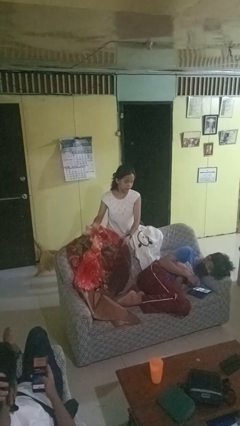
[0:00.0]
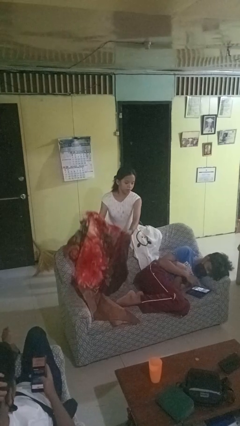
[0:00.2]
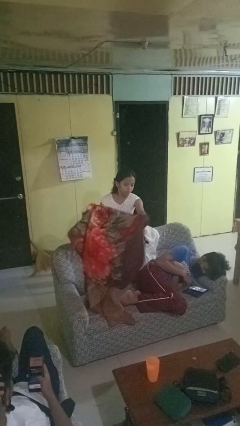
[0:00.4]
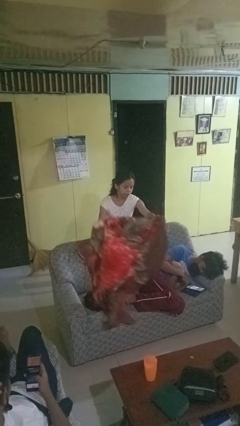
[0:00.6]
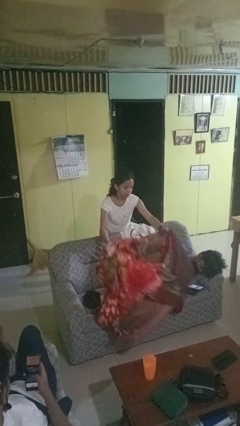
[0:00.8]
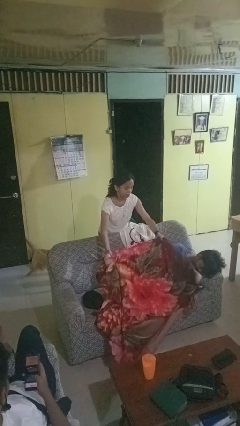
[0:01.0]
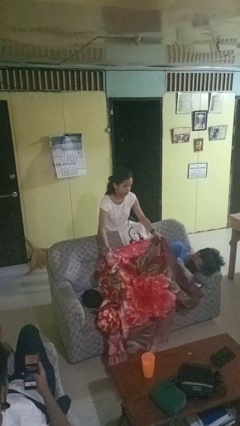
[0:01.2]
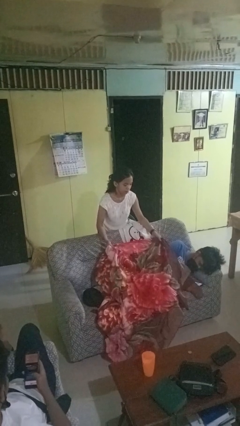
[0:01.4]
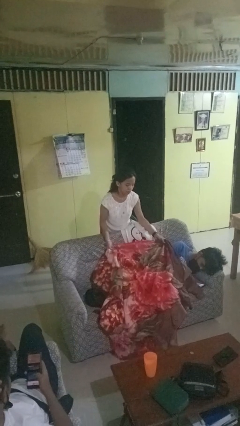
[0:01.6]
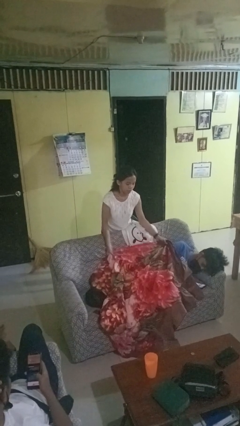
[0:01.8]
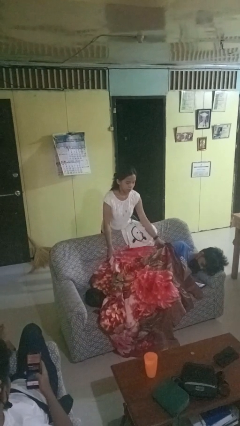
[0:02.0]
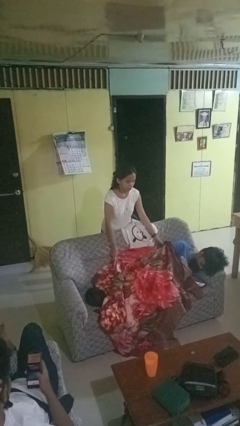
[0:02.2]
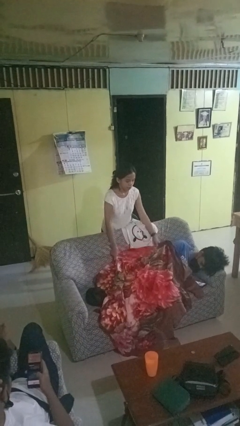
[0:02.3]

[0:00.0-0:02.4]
person covers friend with blanket

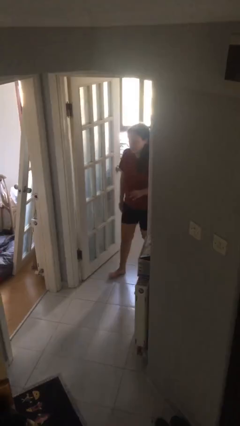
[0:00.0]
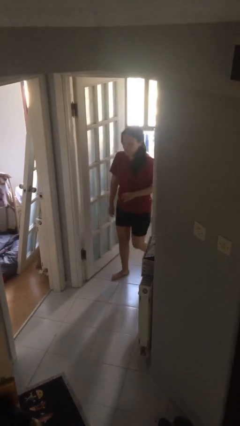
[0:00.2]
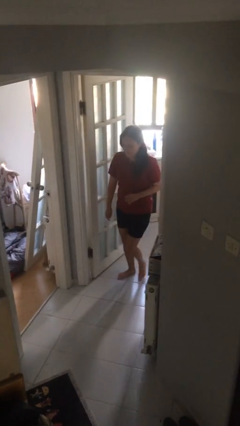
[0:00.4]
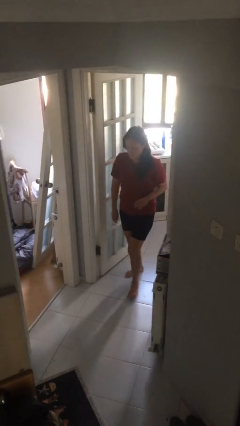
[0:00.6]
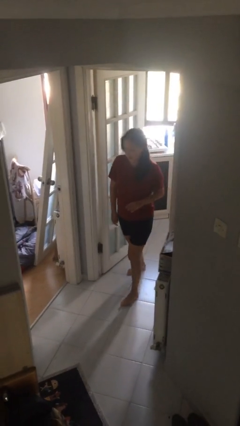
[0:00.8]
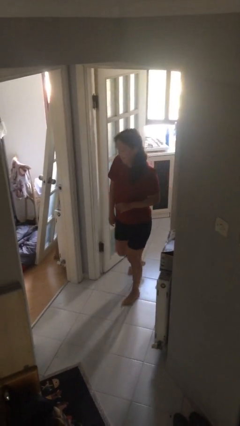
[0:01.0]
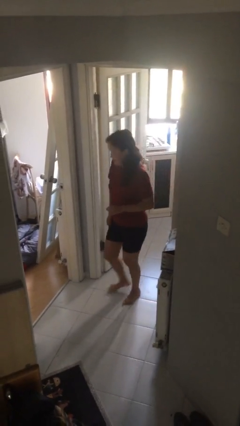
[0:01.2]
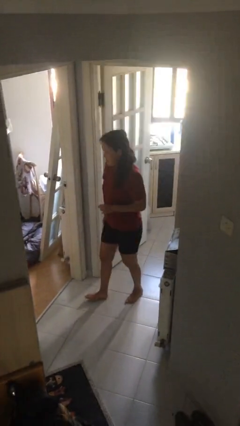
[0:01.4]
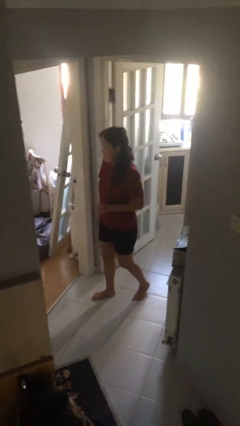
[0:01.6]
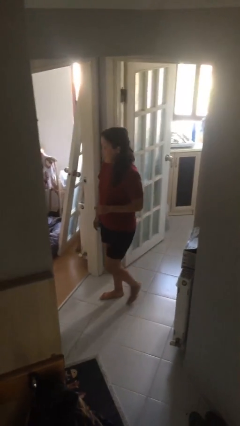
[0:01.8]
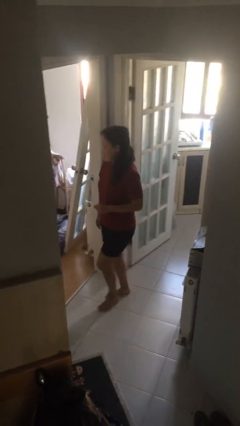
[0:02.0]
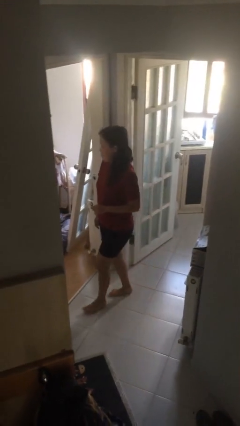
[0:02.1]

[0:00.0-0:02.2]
person enters scene through structure

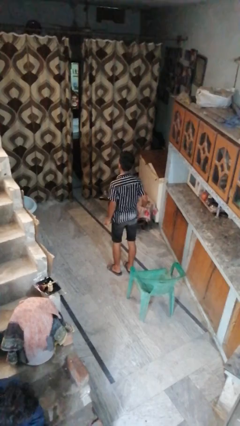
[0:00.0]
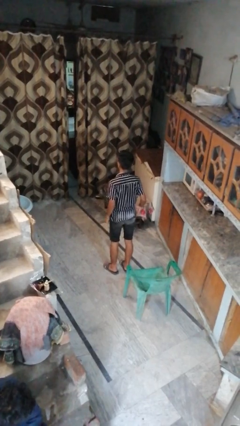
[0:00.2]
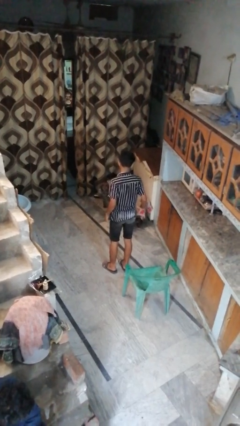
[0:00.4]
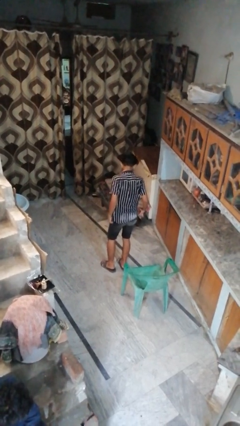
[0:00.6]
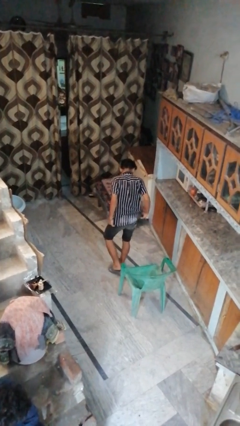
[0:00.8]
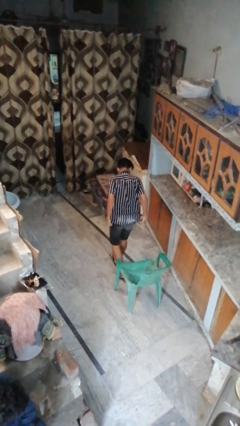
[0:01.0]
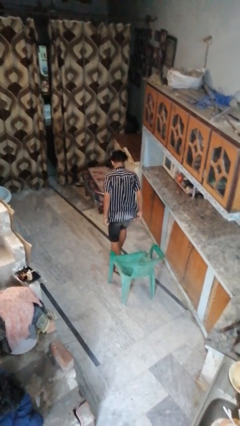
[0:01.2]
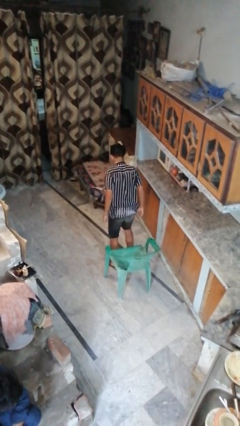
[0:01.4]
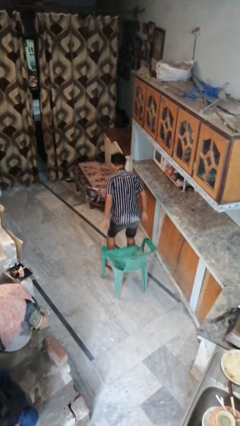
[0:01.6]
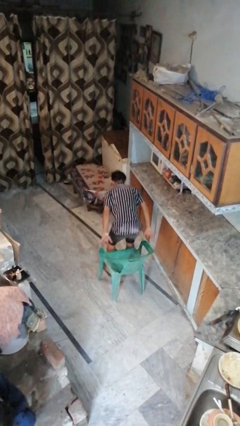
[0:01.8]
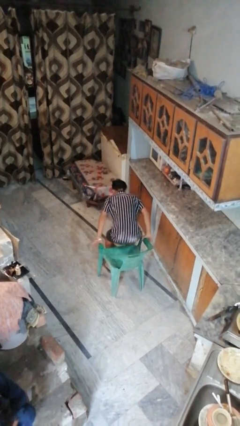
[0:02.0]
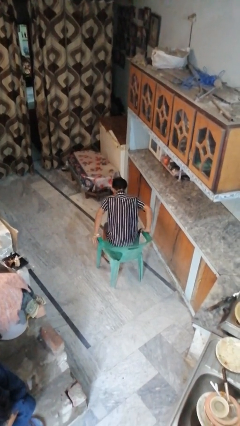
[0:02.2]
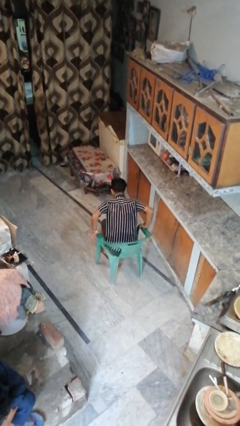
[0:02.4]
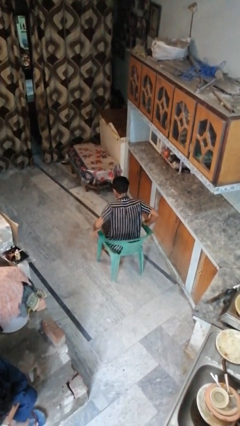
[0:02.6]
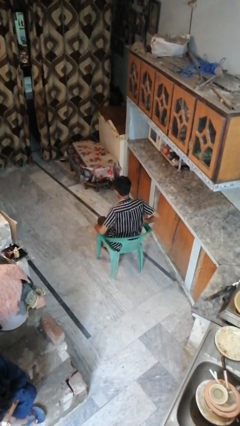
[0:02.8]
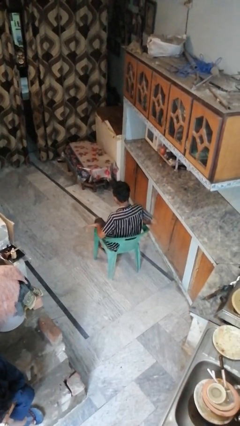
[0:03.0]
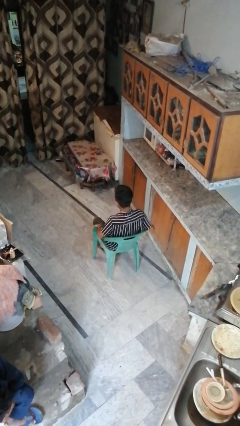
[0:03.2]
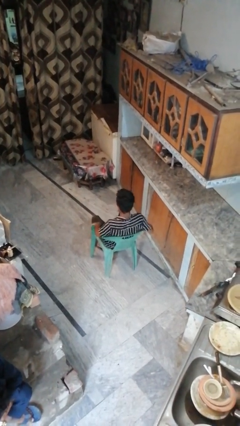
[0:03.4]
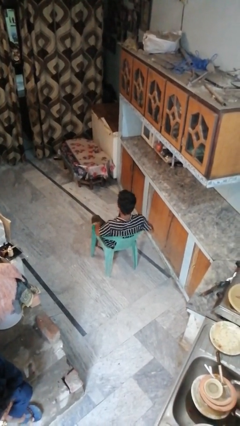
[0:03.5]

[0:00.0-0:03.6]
person sits down

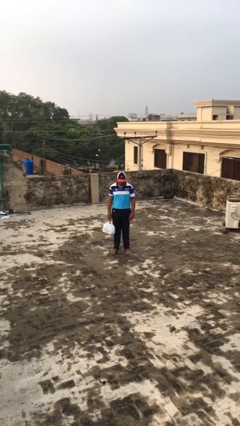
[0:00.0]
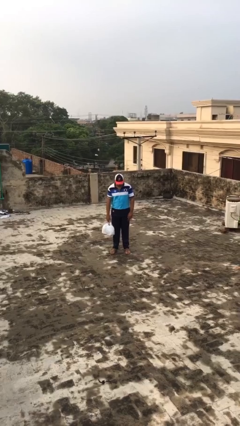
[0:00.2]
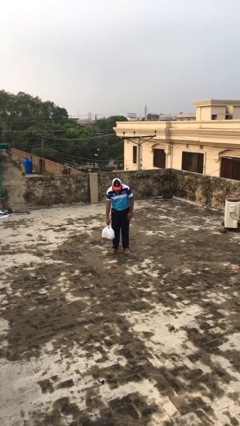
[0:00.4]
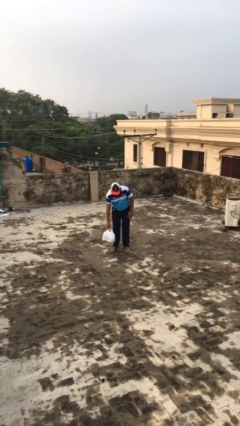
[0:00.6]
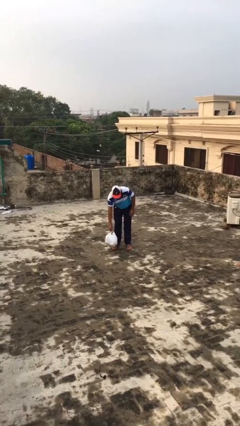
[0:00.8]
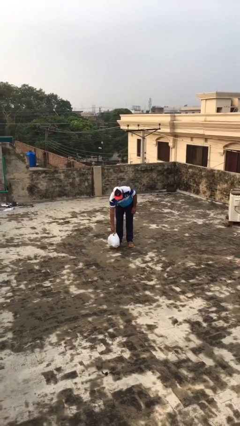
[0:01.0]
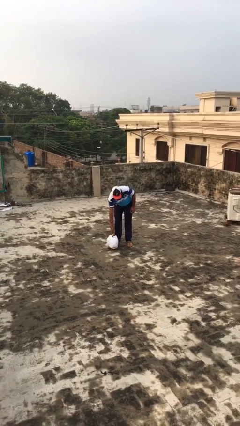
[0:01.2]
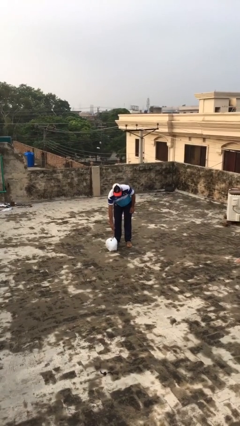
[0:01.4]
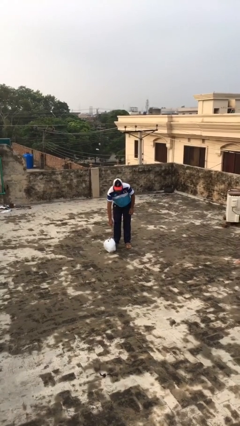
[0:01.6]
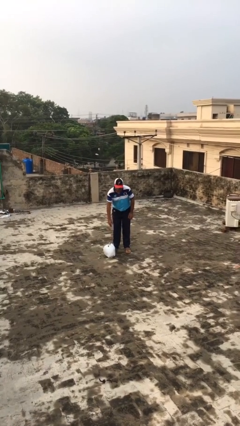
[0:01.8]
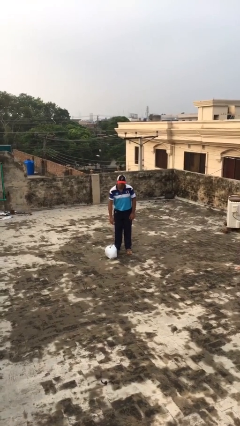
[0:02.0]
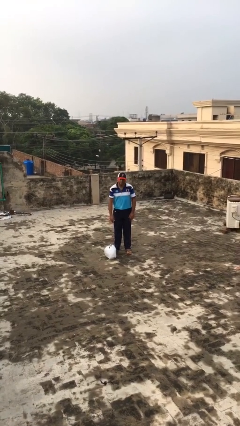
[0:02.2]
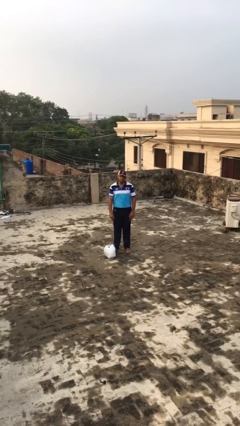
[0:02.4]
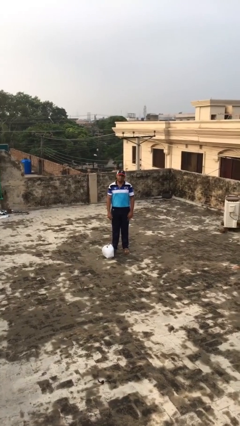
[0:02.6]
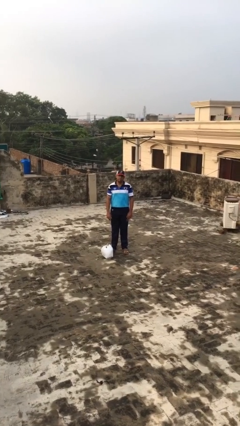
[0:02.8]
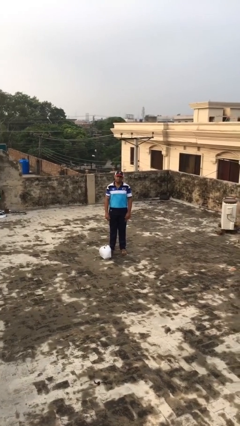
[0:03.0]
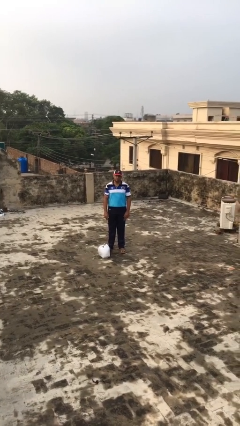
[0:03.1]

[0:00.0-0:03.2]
person puts down object on floor

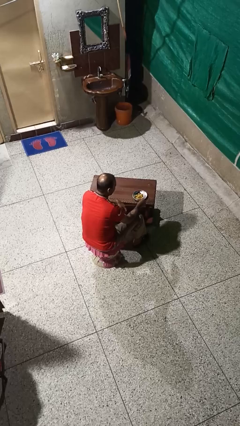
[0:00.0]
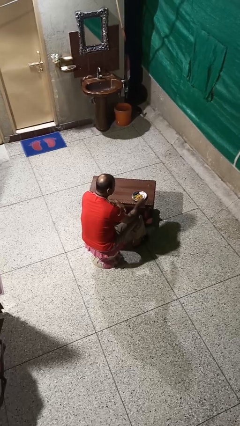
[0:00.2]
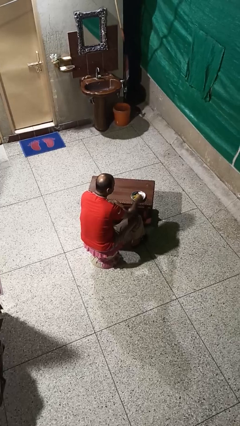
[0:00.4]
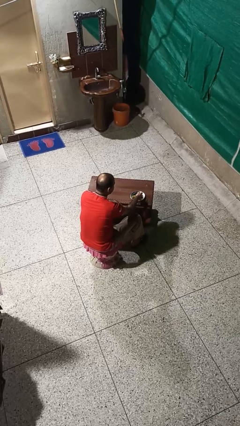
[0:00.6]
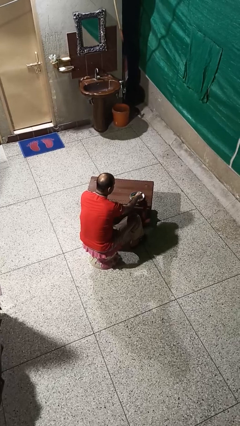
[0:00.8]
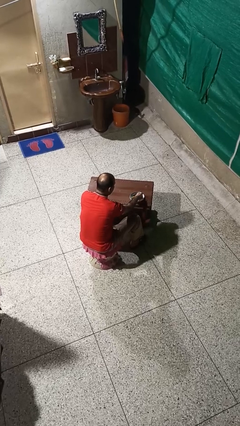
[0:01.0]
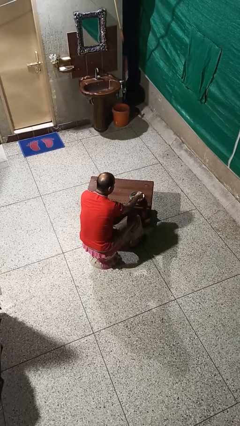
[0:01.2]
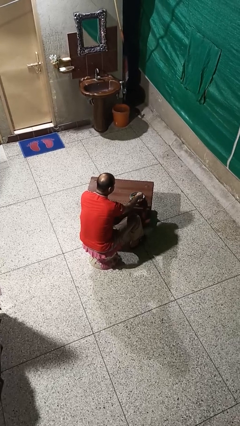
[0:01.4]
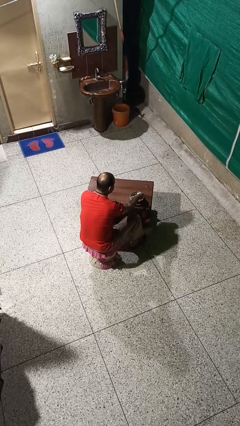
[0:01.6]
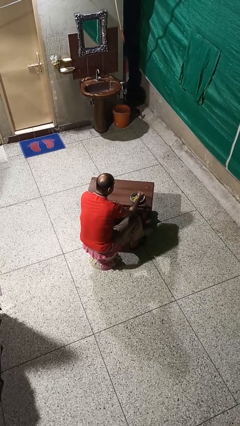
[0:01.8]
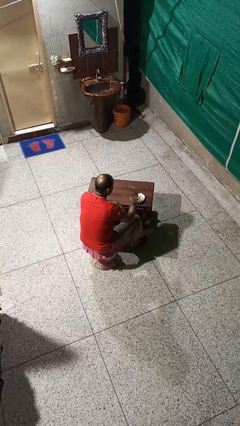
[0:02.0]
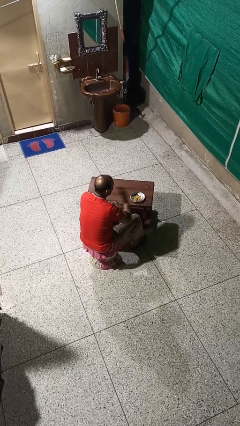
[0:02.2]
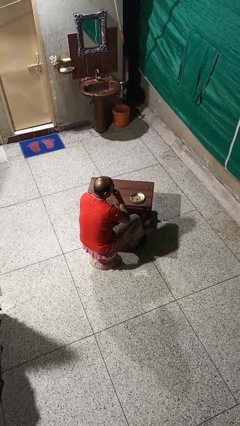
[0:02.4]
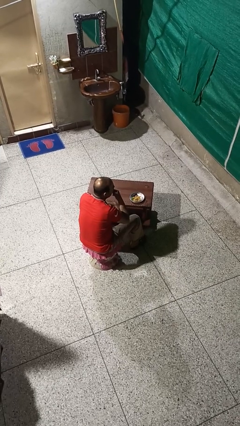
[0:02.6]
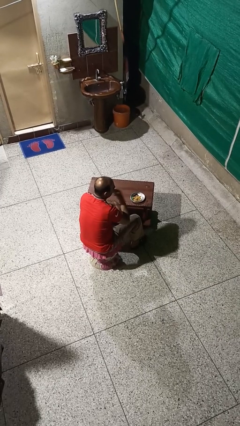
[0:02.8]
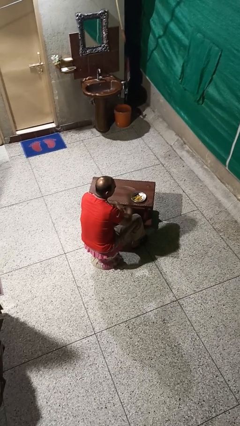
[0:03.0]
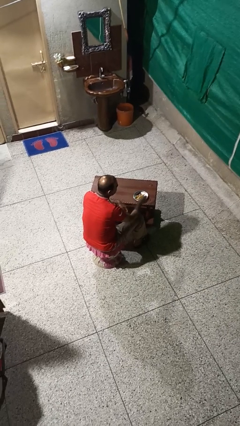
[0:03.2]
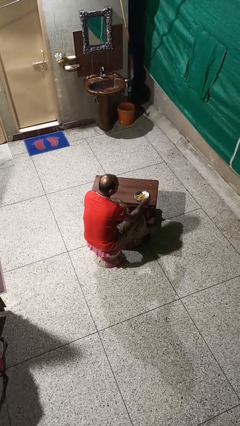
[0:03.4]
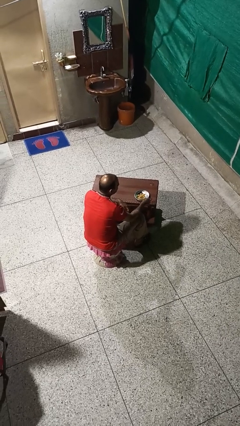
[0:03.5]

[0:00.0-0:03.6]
person eats with hands

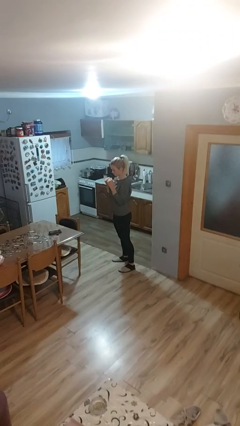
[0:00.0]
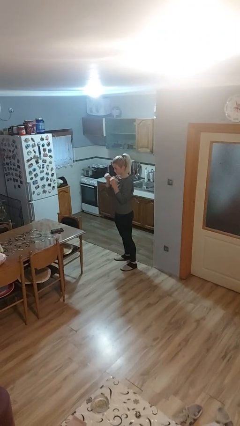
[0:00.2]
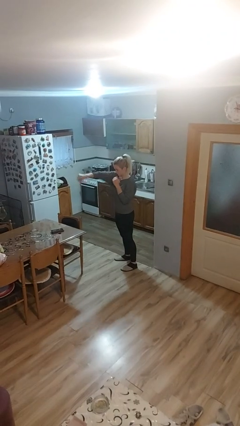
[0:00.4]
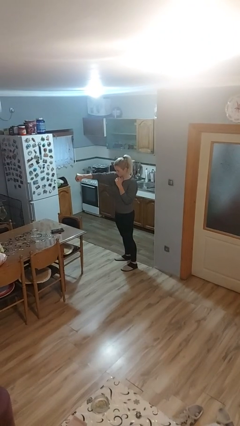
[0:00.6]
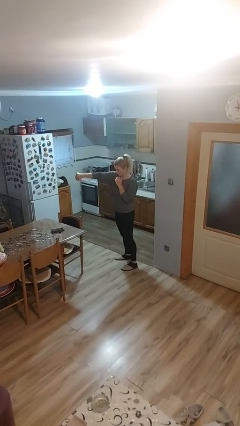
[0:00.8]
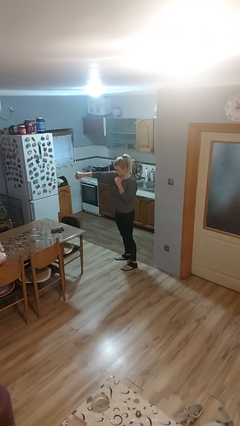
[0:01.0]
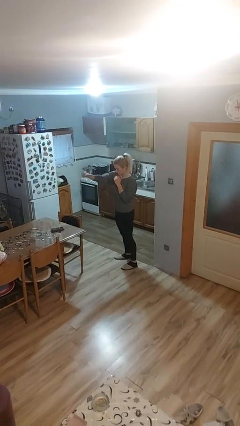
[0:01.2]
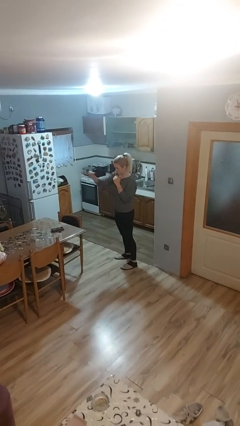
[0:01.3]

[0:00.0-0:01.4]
person punches

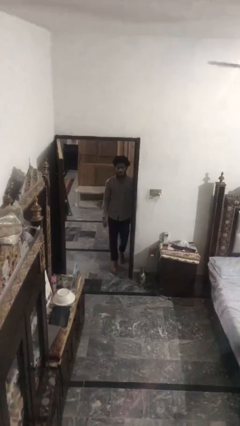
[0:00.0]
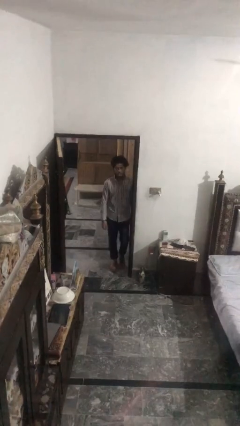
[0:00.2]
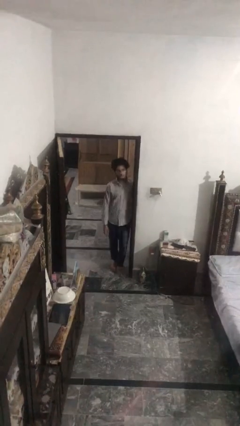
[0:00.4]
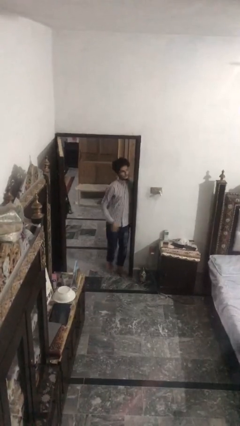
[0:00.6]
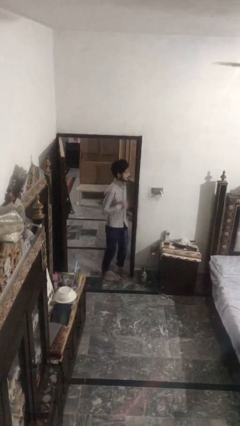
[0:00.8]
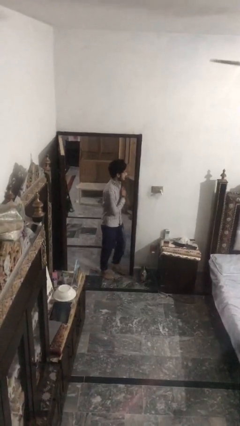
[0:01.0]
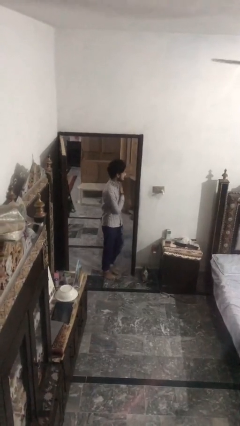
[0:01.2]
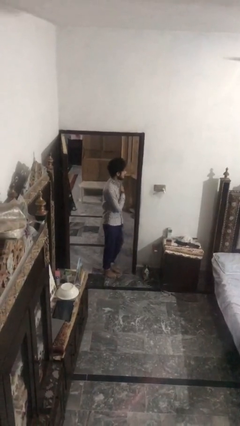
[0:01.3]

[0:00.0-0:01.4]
person bumps into wall
